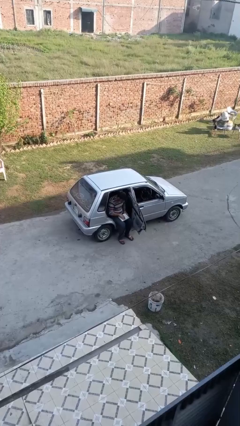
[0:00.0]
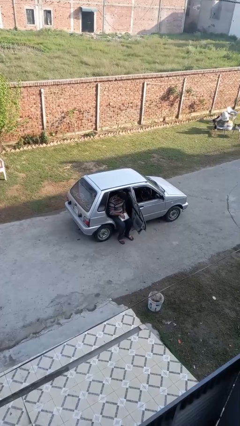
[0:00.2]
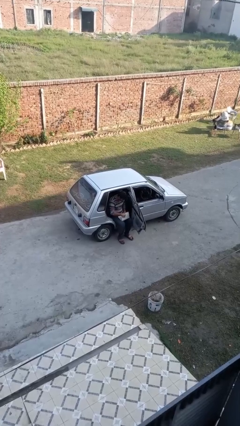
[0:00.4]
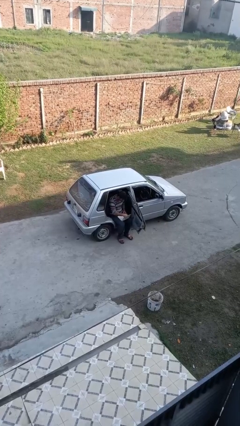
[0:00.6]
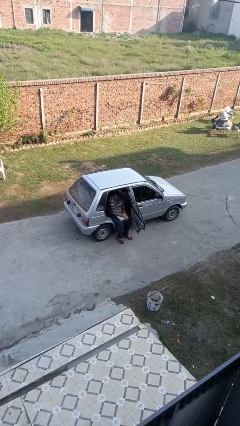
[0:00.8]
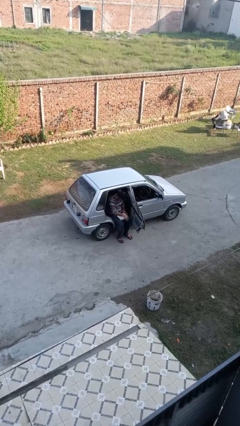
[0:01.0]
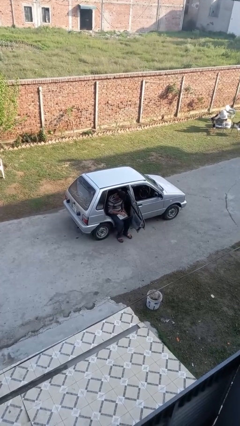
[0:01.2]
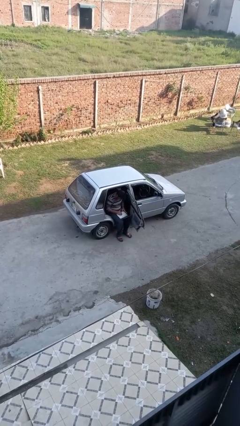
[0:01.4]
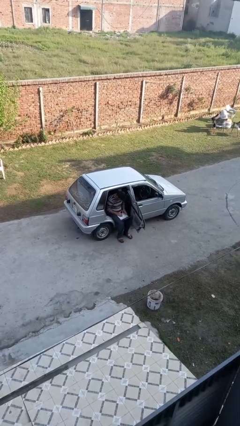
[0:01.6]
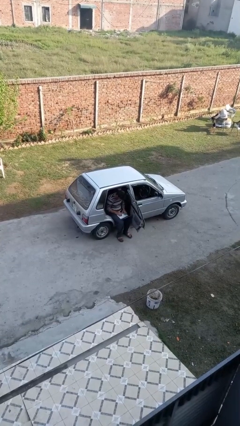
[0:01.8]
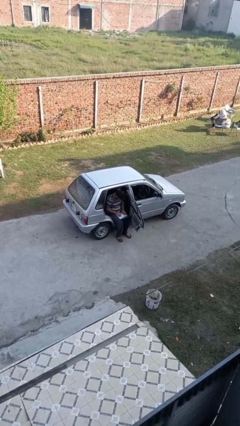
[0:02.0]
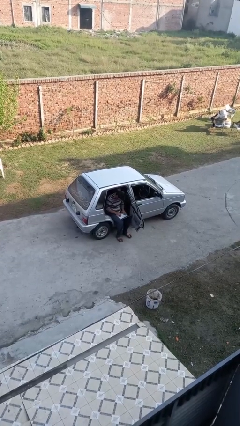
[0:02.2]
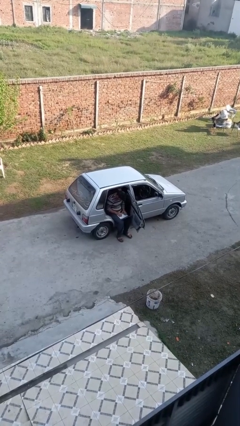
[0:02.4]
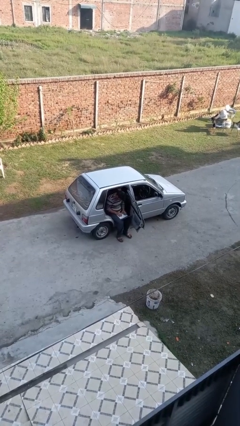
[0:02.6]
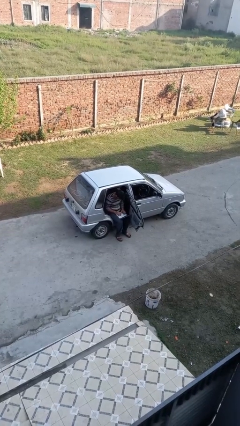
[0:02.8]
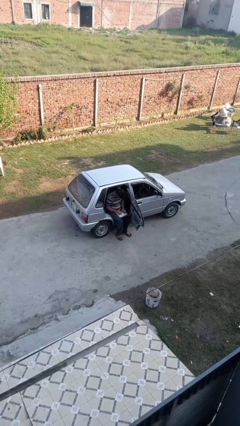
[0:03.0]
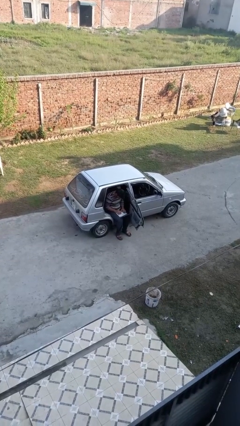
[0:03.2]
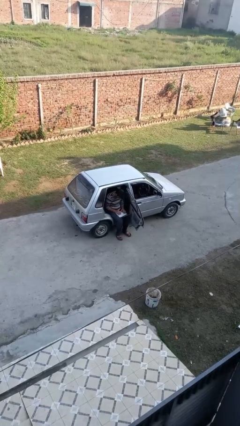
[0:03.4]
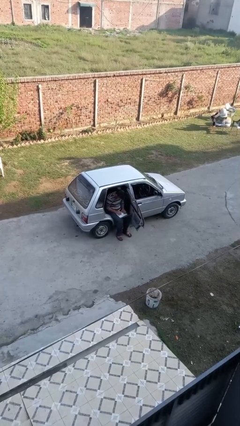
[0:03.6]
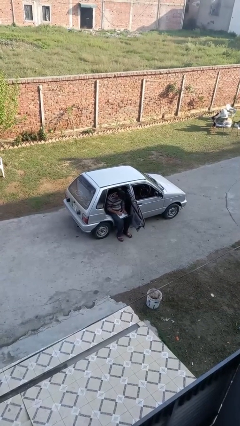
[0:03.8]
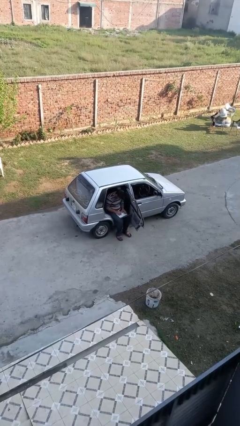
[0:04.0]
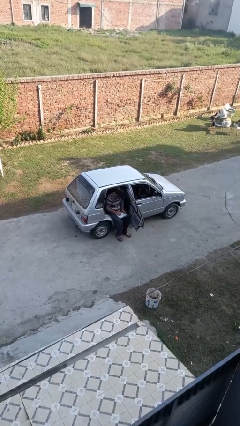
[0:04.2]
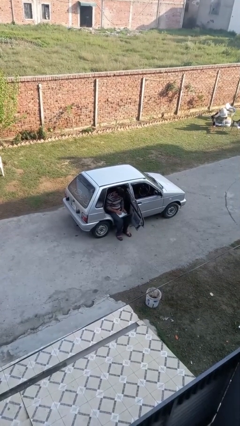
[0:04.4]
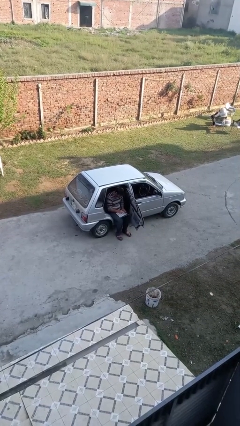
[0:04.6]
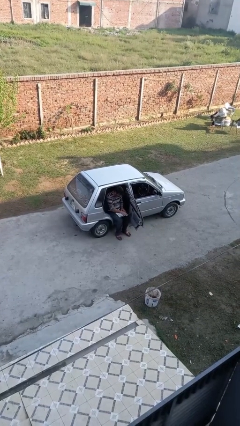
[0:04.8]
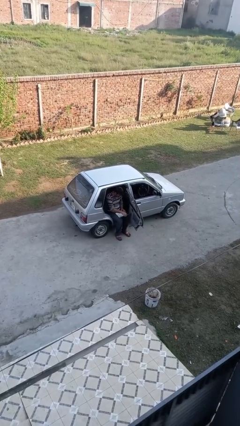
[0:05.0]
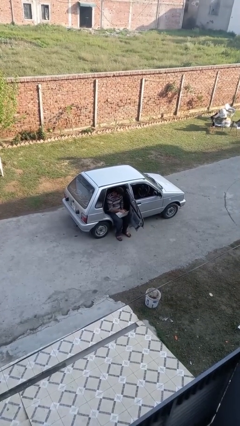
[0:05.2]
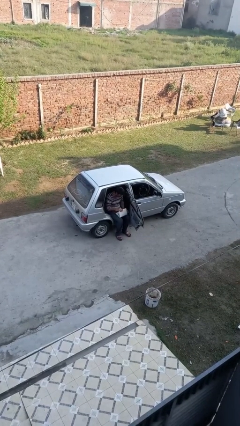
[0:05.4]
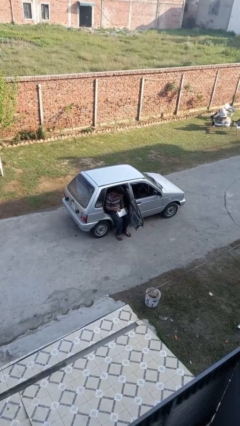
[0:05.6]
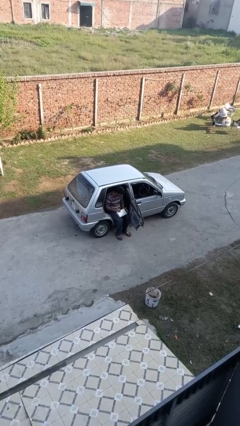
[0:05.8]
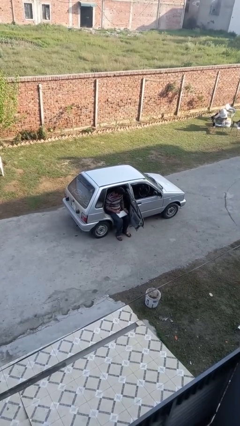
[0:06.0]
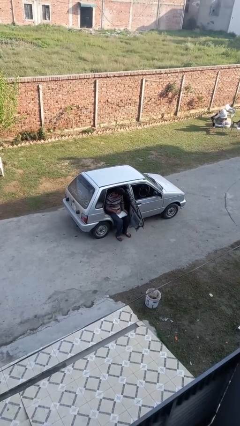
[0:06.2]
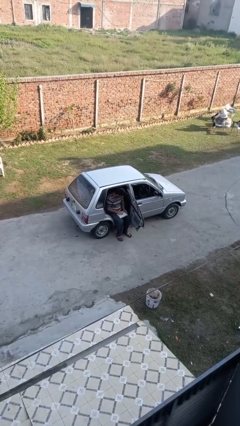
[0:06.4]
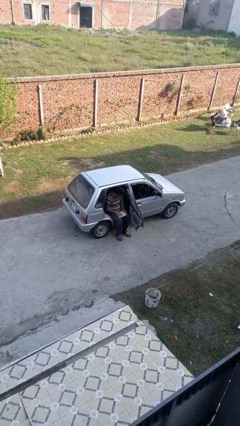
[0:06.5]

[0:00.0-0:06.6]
person interacts with laptop

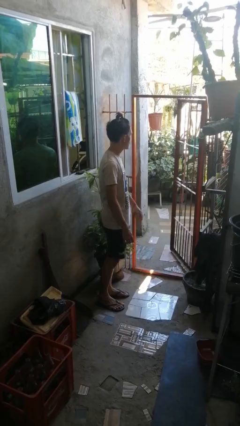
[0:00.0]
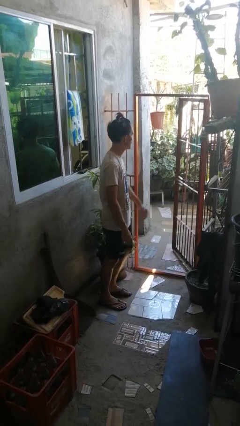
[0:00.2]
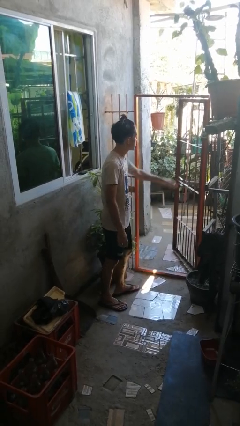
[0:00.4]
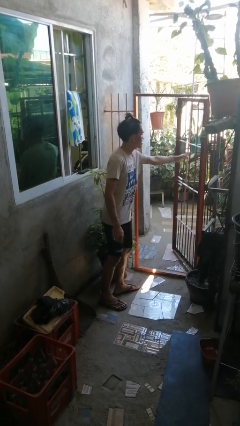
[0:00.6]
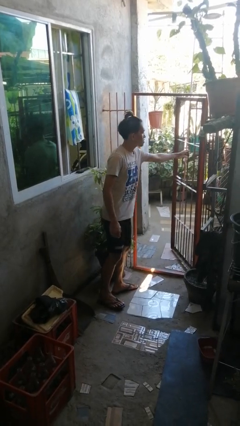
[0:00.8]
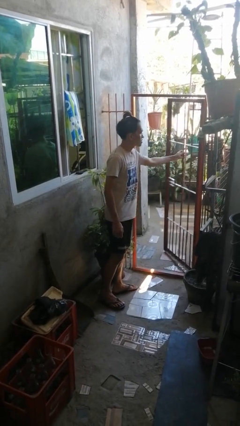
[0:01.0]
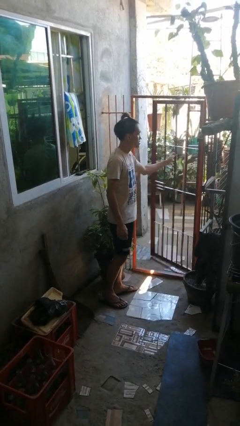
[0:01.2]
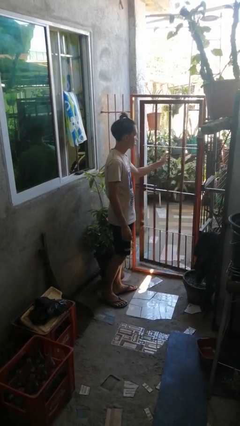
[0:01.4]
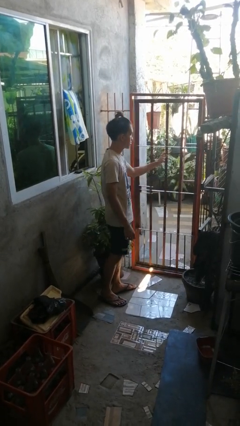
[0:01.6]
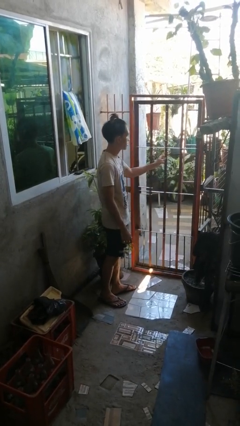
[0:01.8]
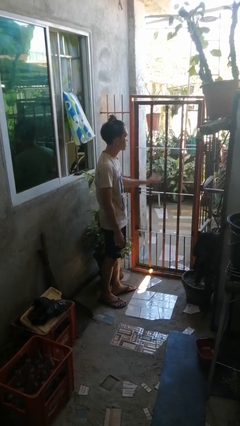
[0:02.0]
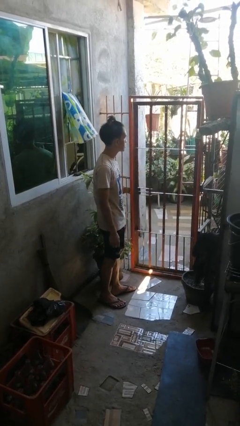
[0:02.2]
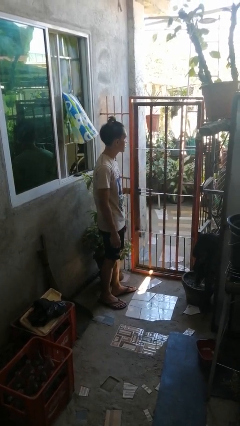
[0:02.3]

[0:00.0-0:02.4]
person closes gate

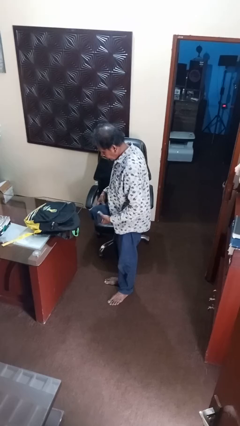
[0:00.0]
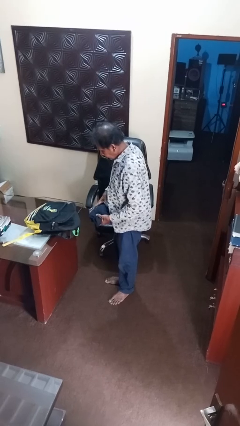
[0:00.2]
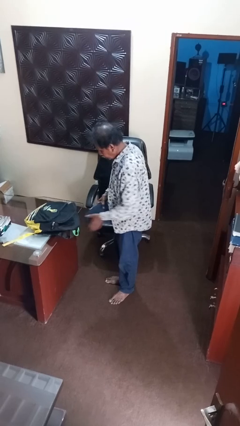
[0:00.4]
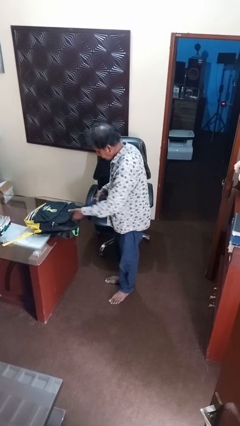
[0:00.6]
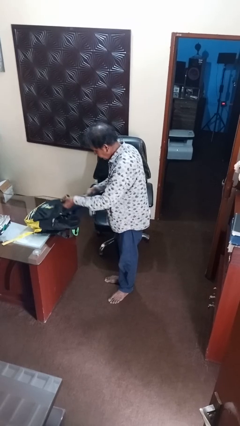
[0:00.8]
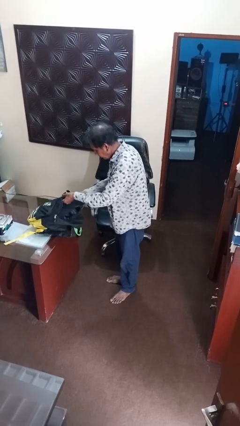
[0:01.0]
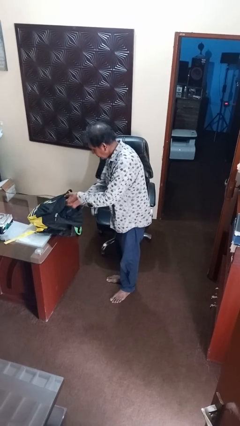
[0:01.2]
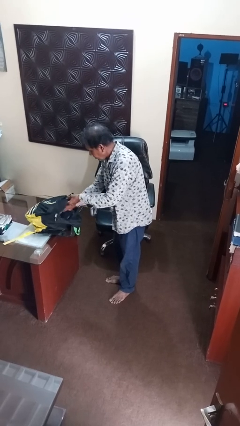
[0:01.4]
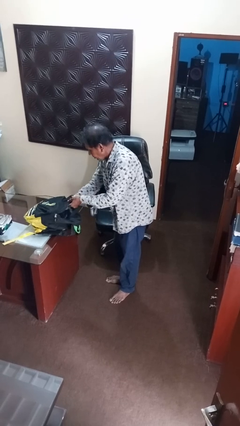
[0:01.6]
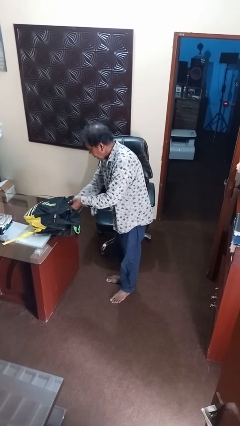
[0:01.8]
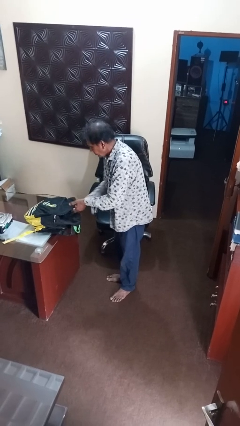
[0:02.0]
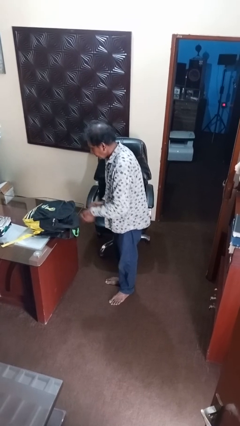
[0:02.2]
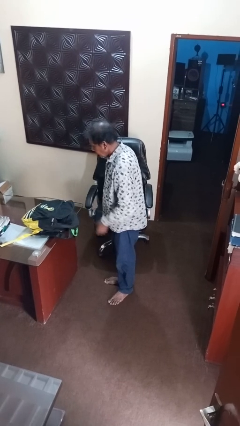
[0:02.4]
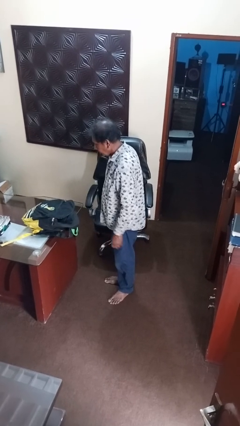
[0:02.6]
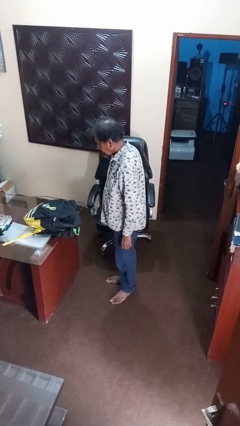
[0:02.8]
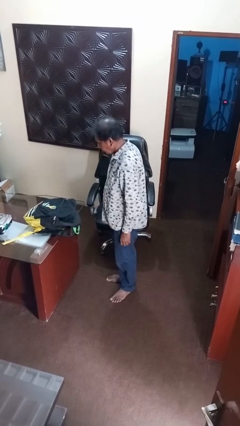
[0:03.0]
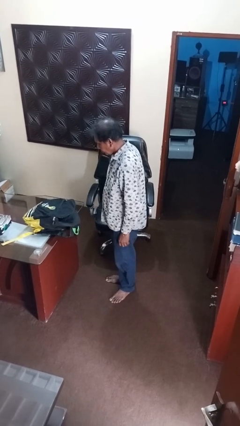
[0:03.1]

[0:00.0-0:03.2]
person puts object into backpack

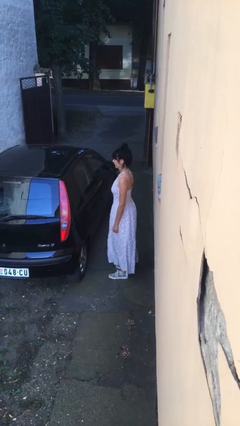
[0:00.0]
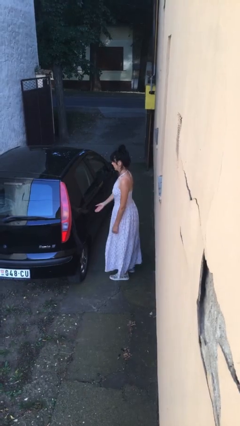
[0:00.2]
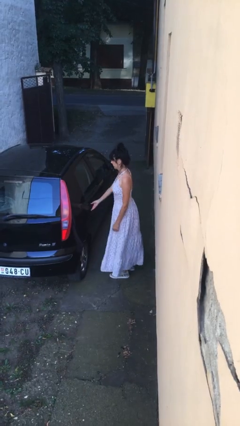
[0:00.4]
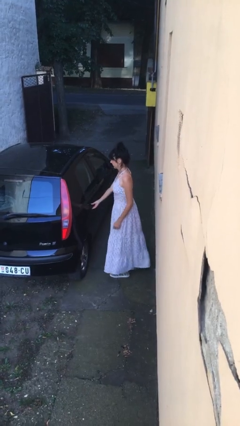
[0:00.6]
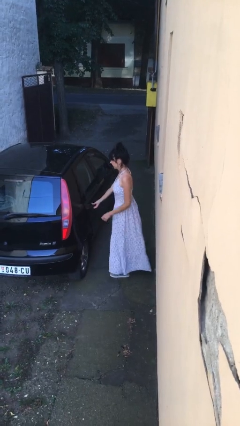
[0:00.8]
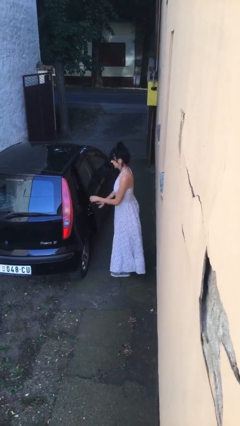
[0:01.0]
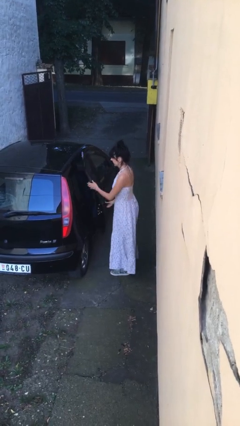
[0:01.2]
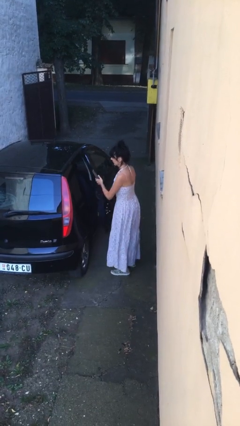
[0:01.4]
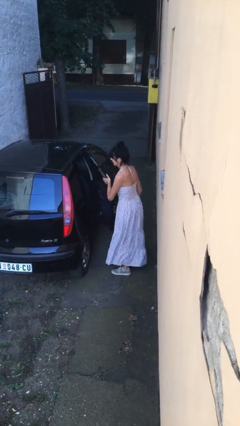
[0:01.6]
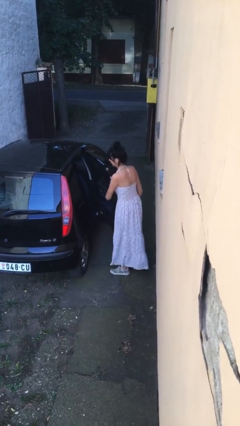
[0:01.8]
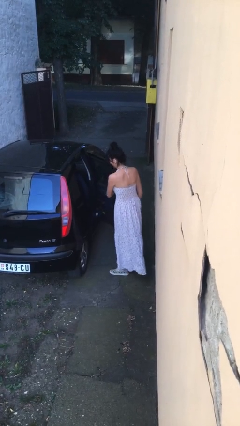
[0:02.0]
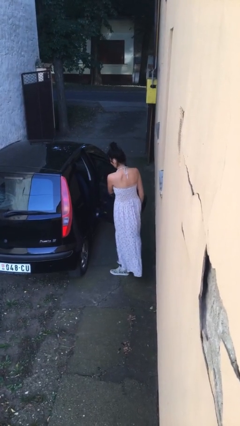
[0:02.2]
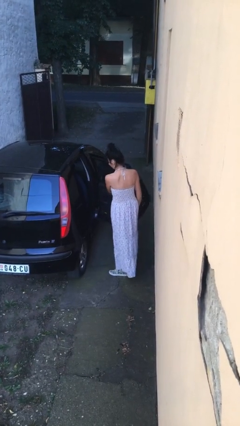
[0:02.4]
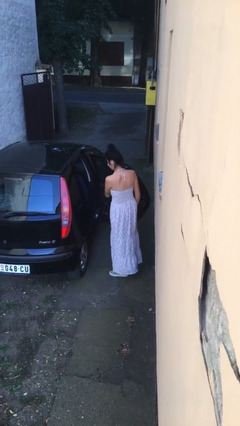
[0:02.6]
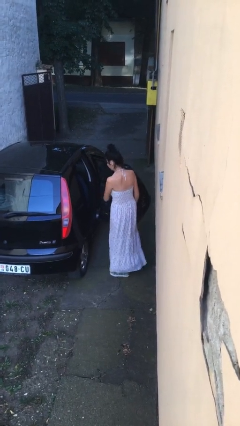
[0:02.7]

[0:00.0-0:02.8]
person opens car door

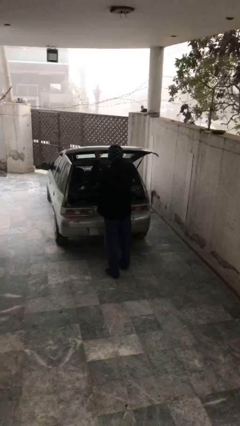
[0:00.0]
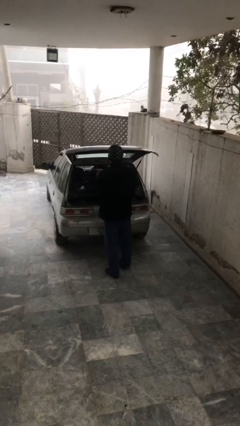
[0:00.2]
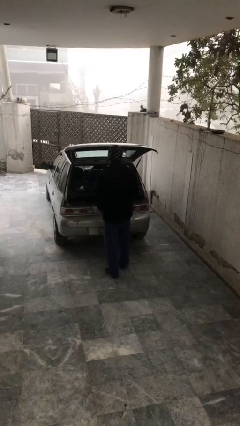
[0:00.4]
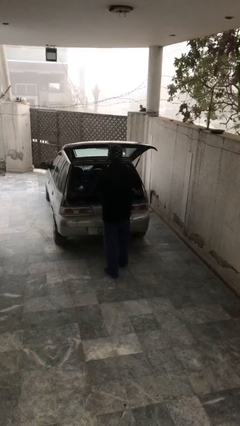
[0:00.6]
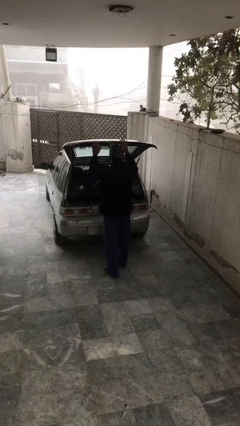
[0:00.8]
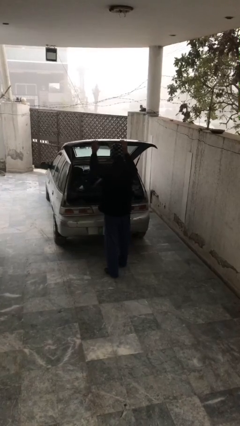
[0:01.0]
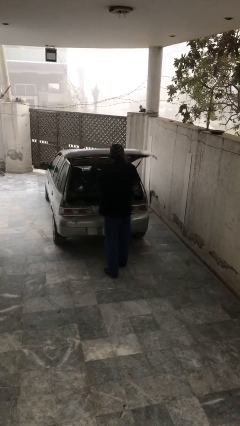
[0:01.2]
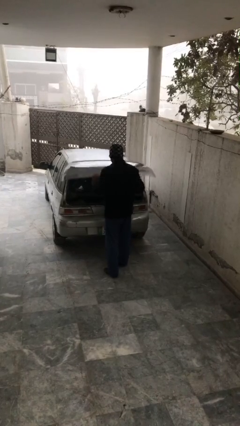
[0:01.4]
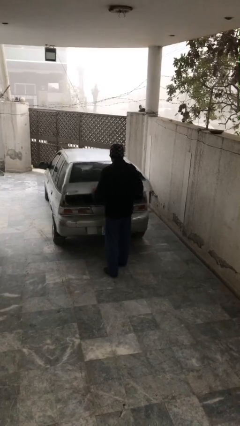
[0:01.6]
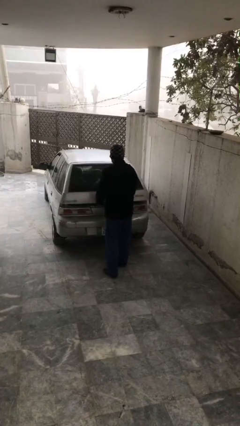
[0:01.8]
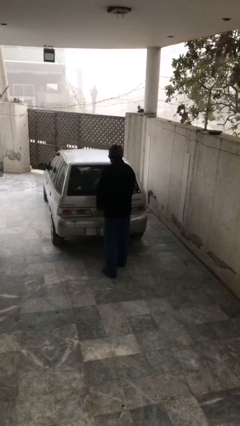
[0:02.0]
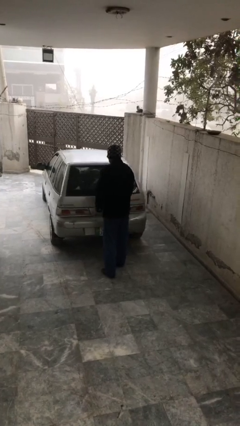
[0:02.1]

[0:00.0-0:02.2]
person closes car trunk

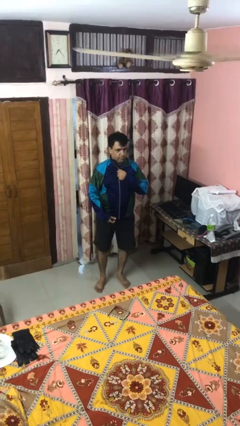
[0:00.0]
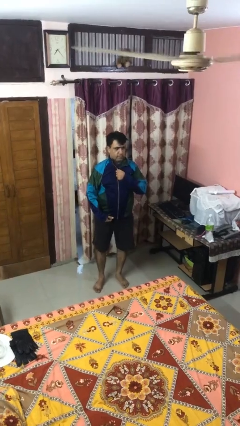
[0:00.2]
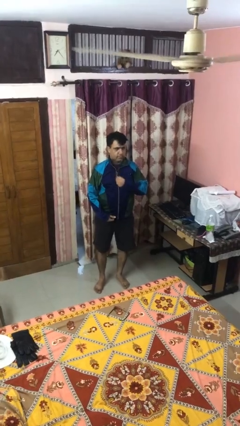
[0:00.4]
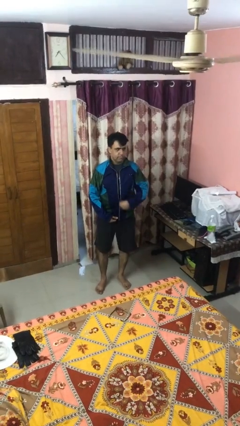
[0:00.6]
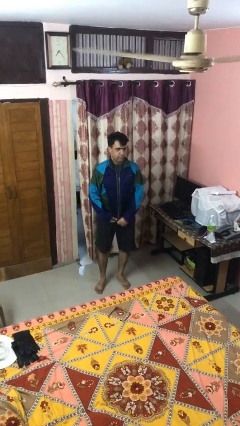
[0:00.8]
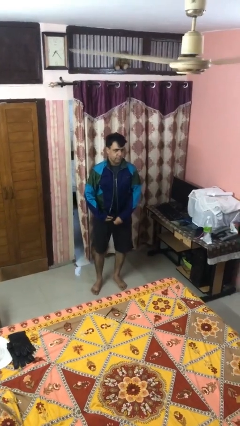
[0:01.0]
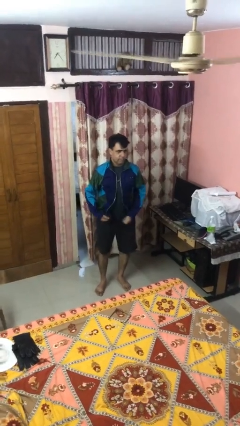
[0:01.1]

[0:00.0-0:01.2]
person unzips jacket
